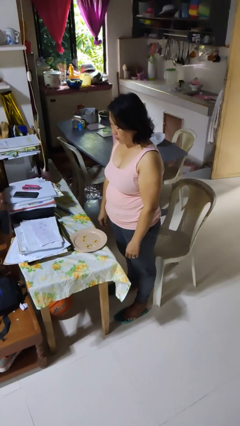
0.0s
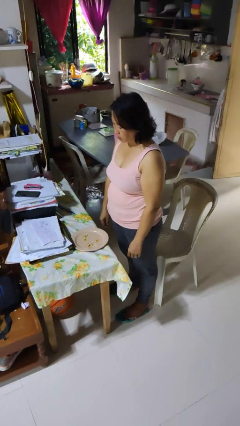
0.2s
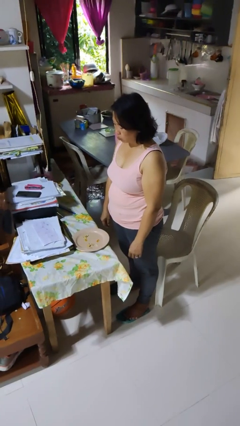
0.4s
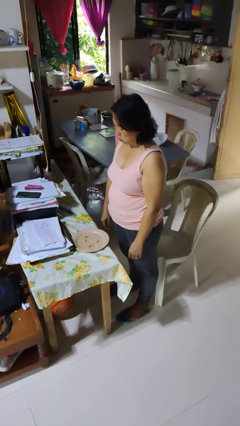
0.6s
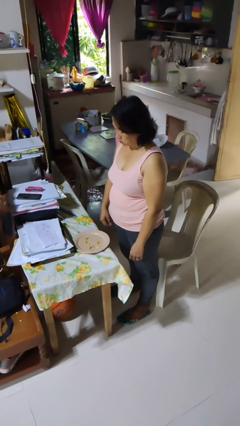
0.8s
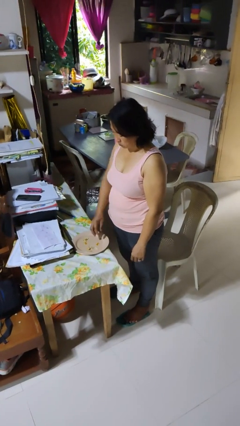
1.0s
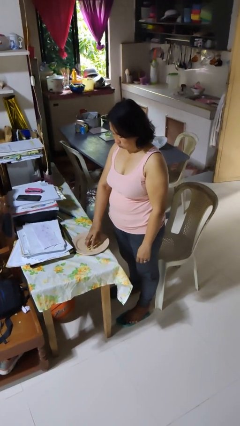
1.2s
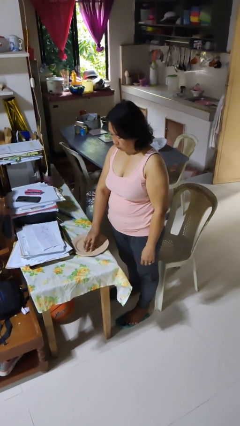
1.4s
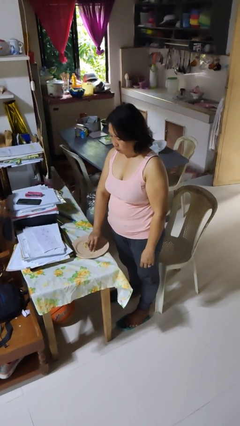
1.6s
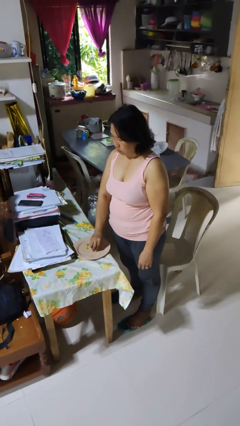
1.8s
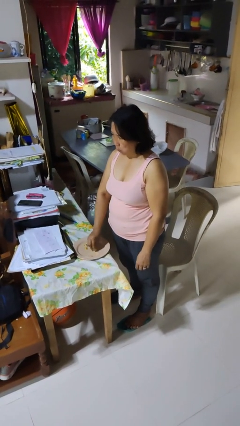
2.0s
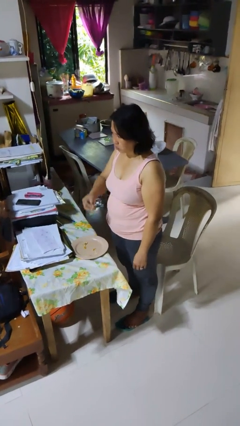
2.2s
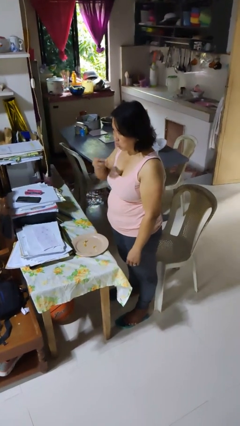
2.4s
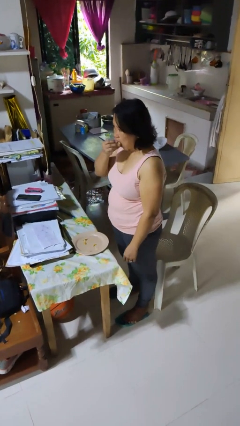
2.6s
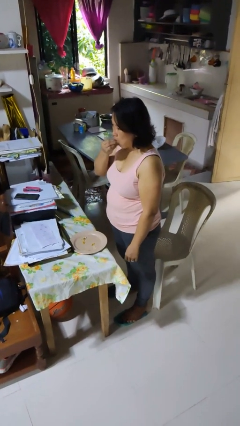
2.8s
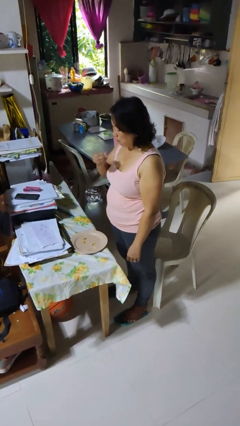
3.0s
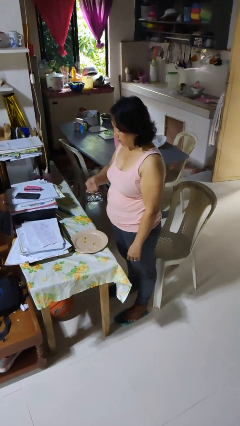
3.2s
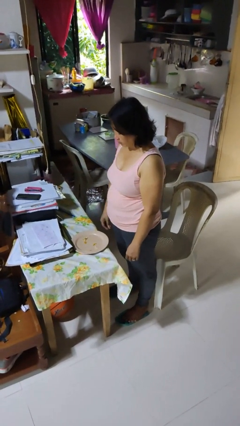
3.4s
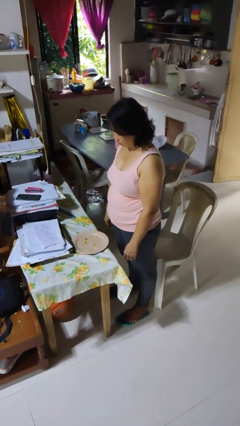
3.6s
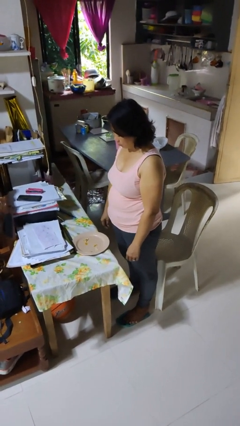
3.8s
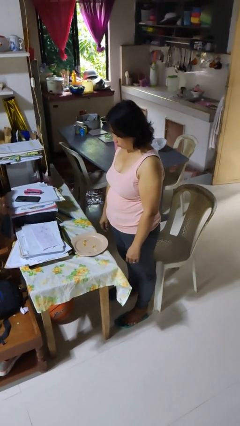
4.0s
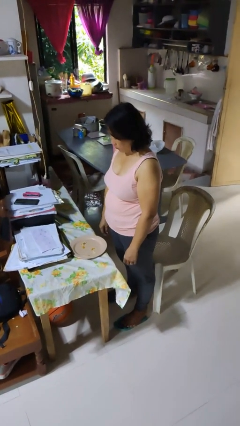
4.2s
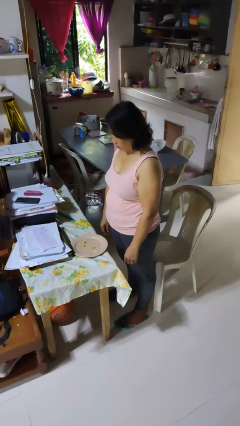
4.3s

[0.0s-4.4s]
person eats with hands

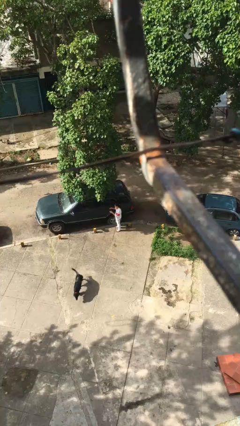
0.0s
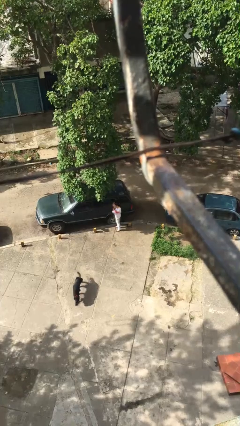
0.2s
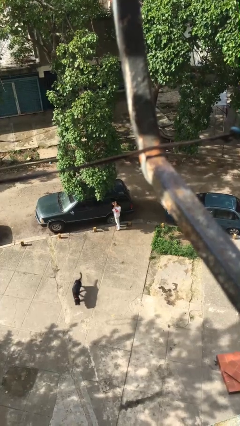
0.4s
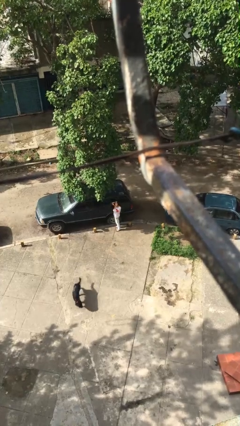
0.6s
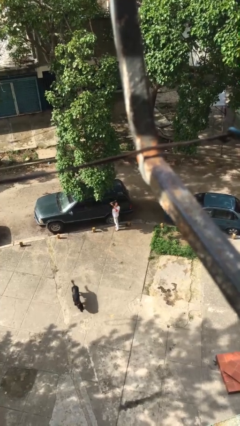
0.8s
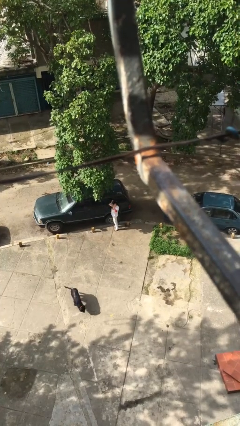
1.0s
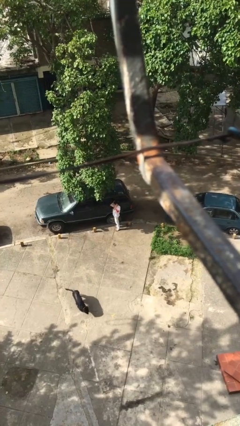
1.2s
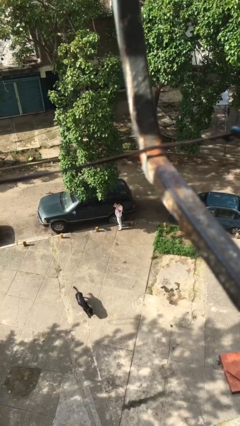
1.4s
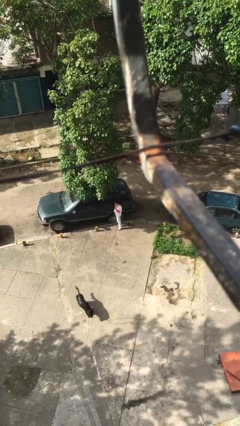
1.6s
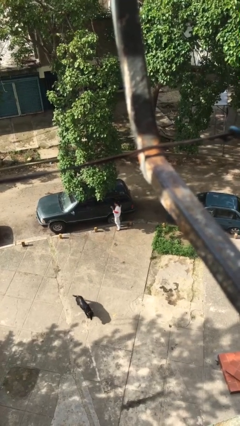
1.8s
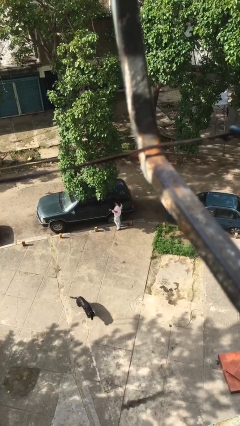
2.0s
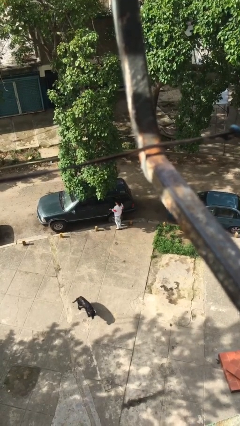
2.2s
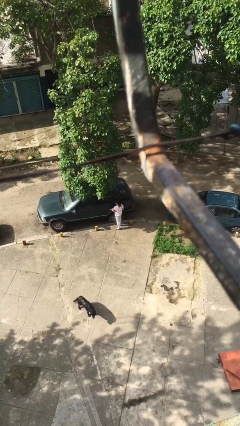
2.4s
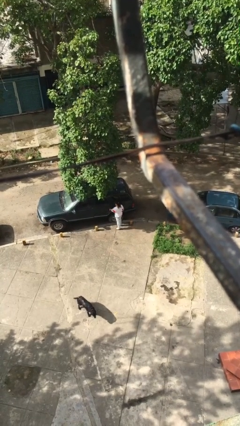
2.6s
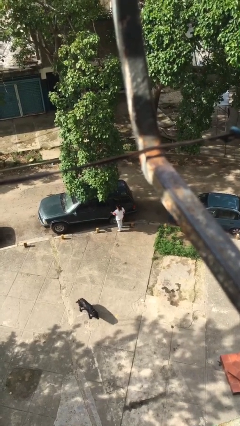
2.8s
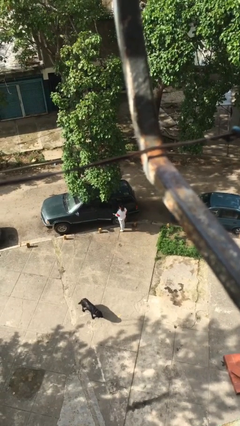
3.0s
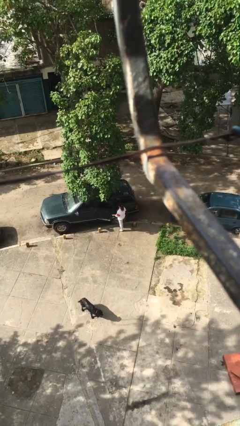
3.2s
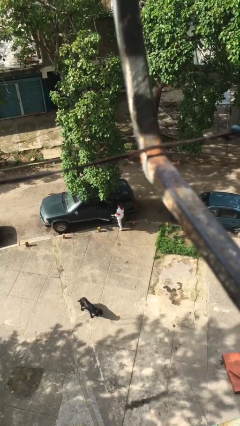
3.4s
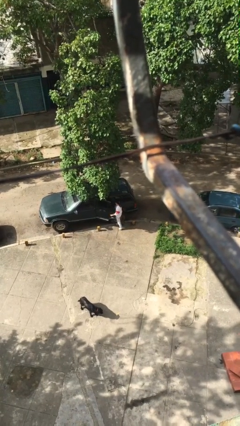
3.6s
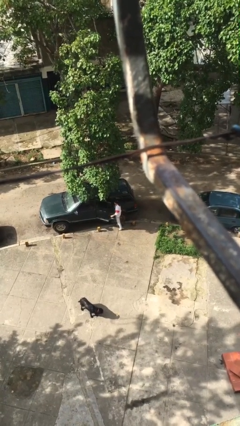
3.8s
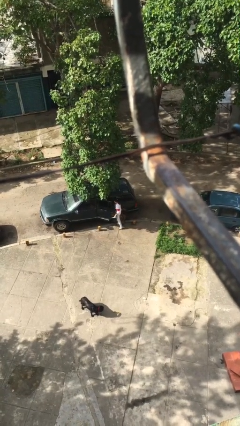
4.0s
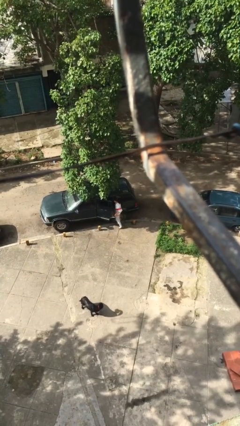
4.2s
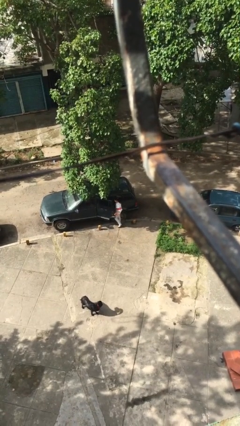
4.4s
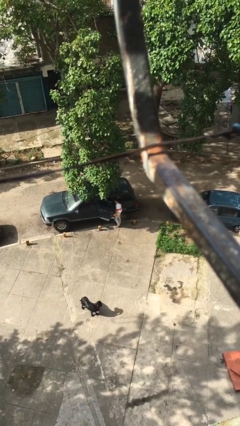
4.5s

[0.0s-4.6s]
person opens car door

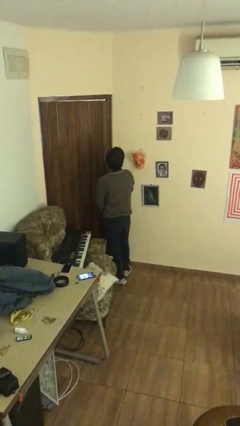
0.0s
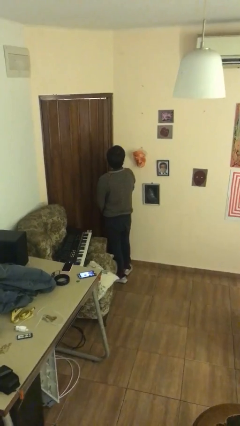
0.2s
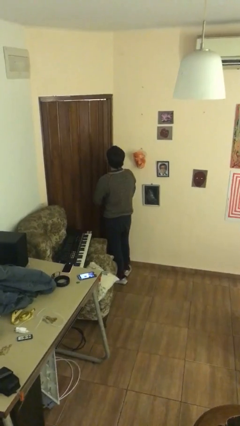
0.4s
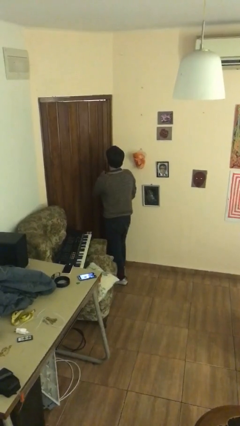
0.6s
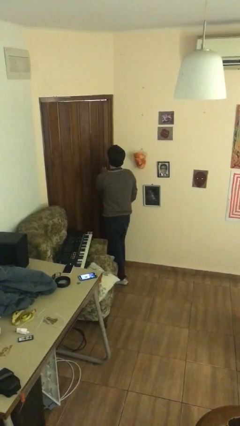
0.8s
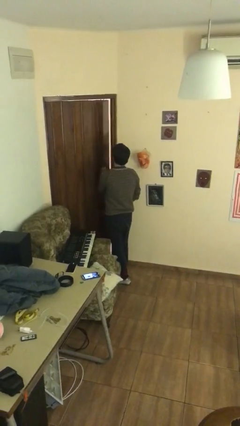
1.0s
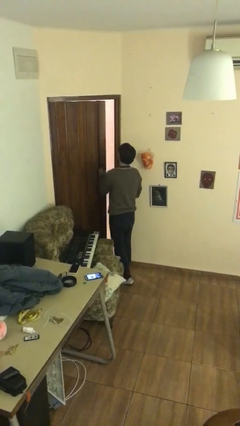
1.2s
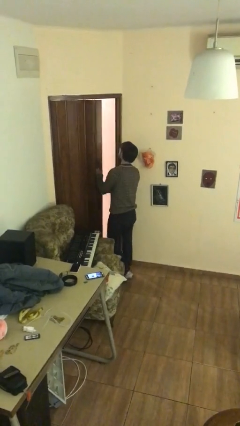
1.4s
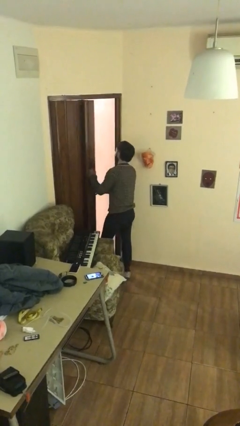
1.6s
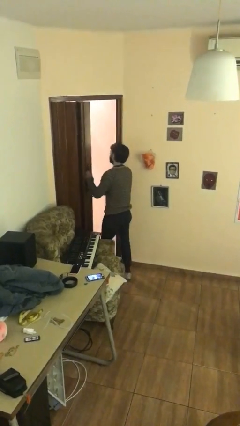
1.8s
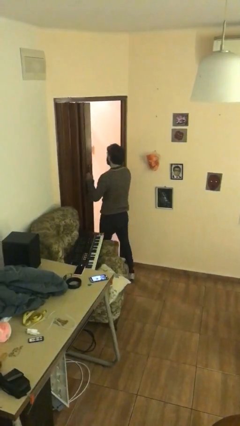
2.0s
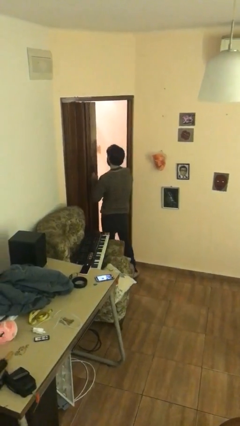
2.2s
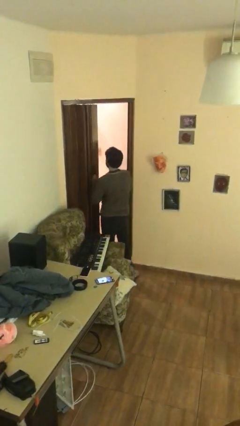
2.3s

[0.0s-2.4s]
person opens sliding door

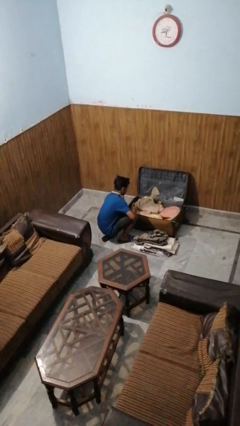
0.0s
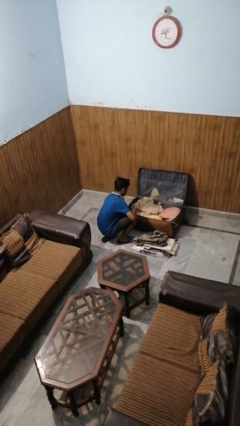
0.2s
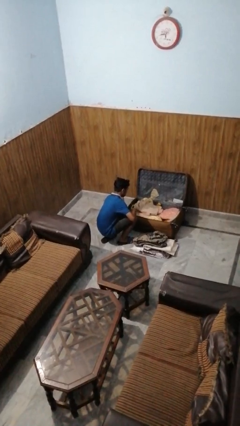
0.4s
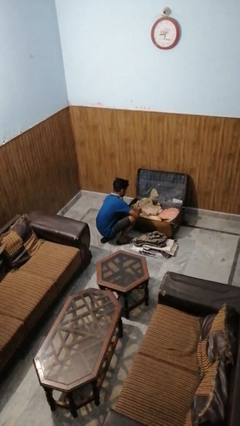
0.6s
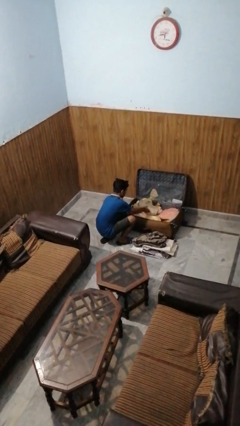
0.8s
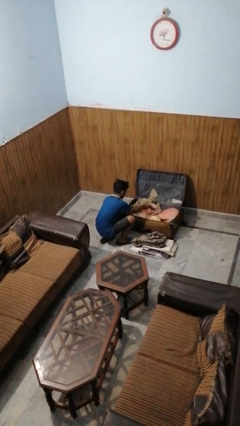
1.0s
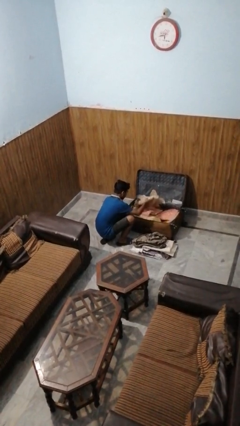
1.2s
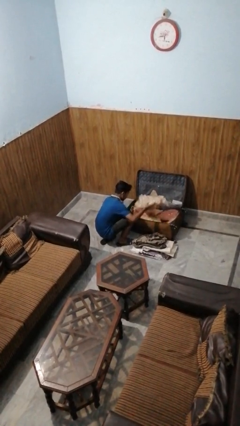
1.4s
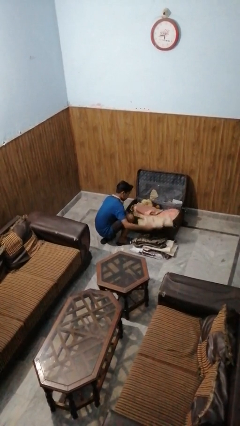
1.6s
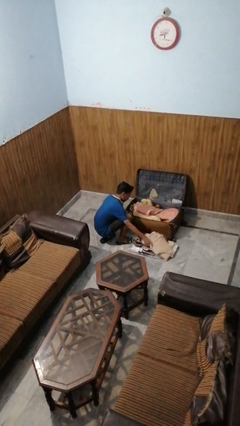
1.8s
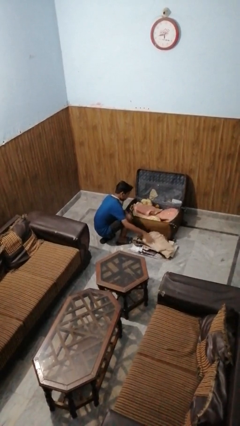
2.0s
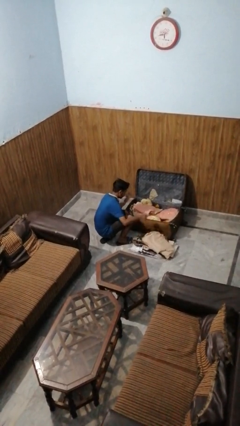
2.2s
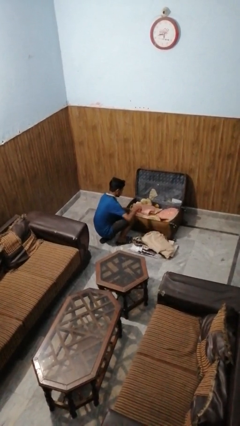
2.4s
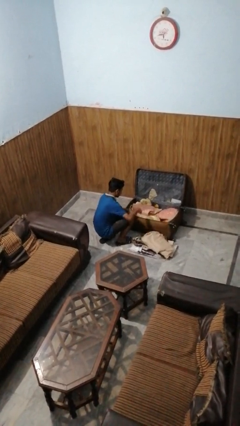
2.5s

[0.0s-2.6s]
person unloads clothes from suitcase

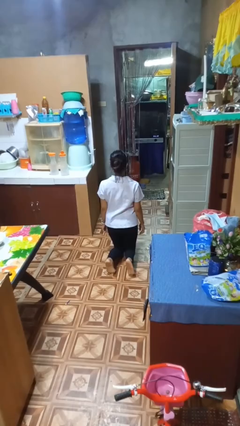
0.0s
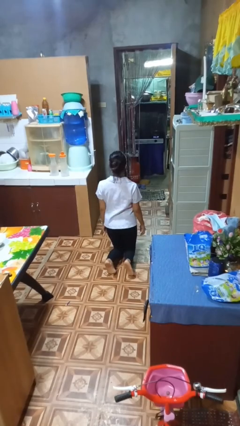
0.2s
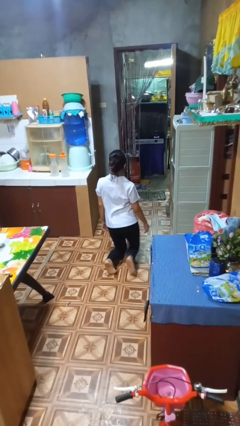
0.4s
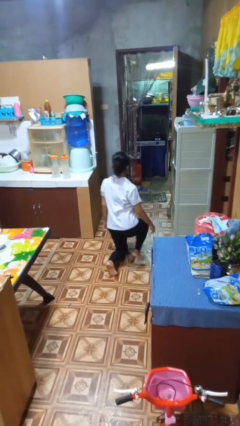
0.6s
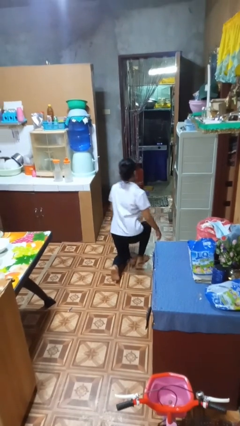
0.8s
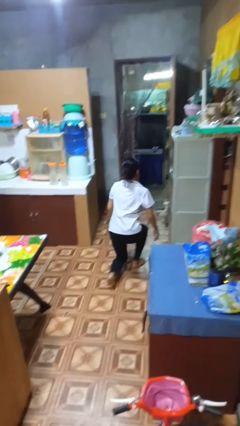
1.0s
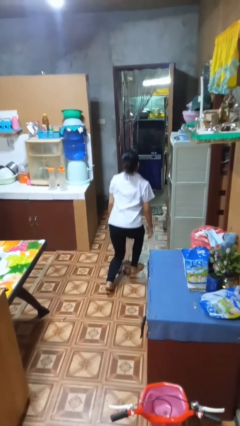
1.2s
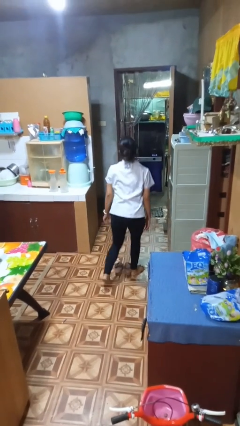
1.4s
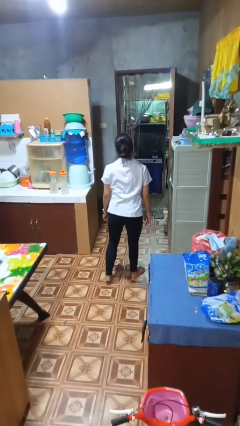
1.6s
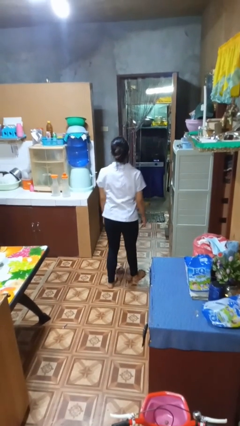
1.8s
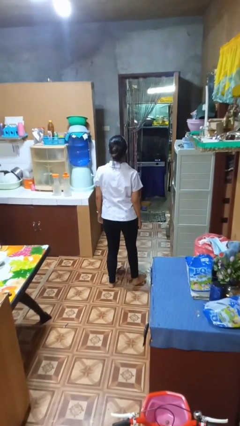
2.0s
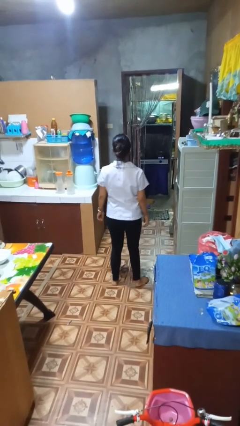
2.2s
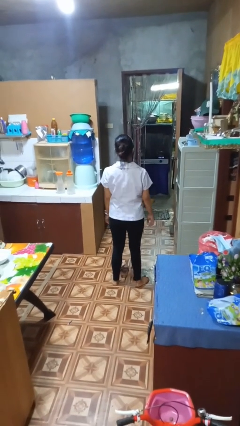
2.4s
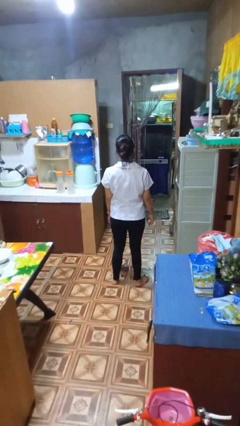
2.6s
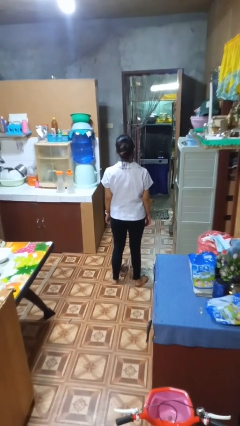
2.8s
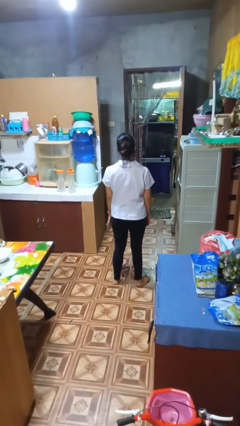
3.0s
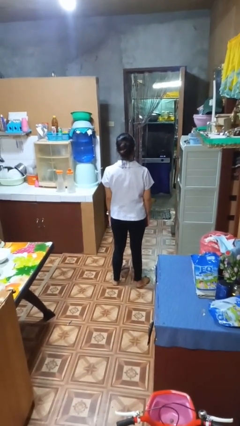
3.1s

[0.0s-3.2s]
person stands up from floor
